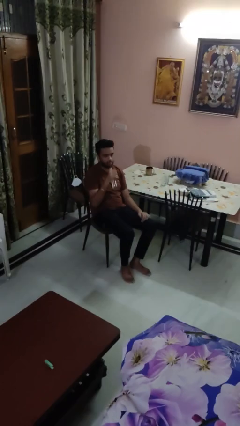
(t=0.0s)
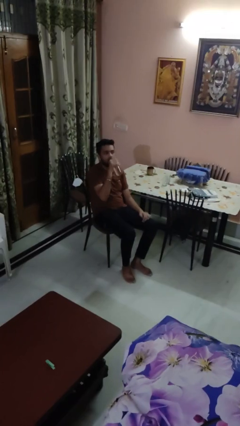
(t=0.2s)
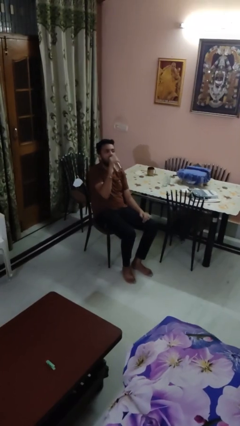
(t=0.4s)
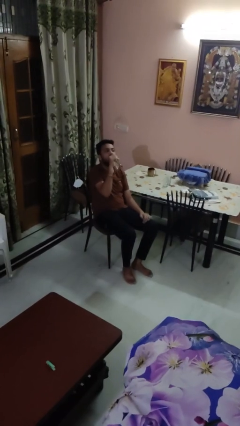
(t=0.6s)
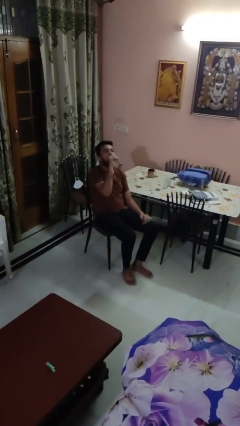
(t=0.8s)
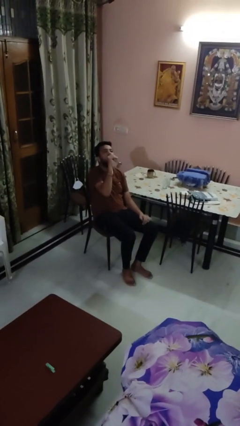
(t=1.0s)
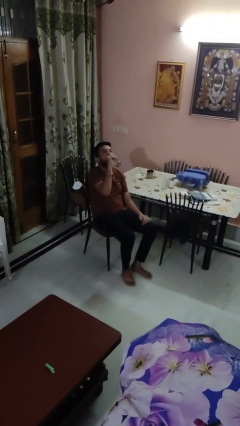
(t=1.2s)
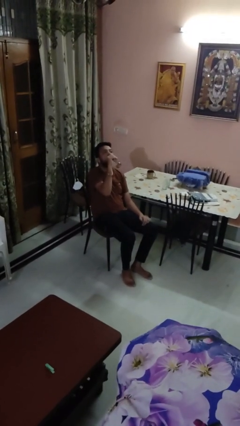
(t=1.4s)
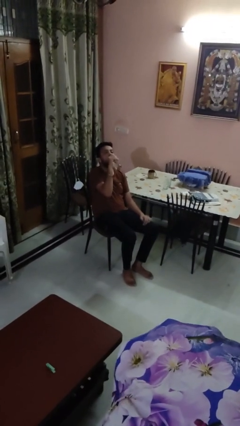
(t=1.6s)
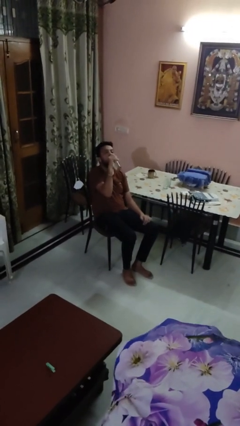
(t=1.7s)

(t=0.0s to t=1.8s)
person drinks from bottle

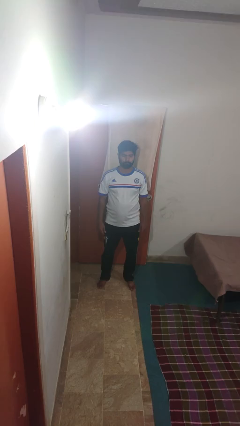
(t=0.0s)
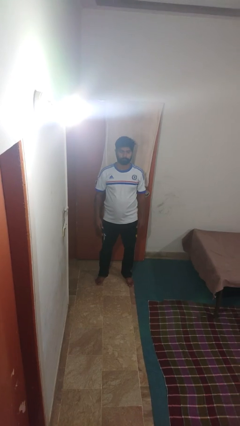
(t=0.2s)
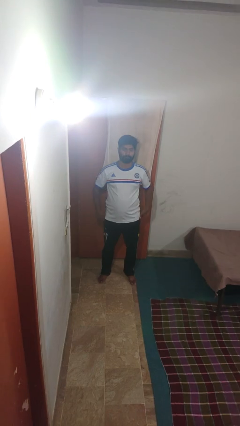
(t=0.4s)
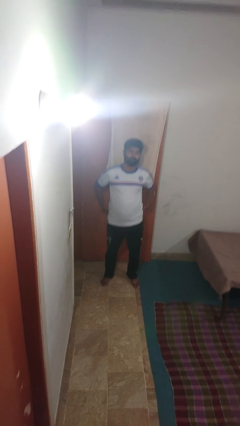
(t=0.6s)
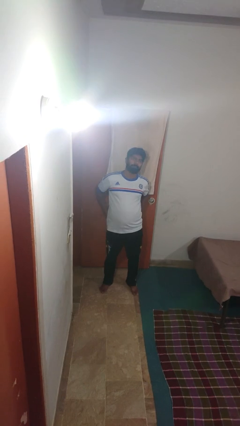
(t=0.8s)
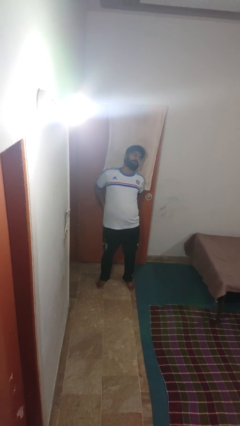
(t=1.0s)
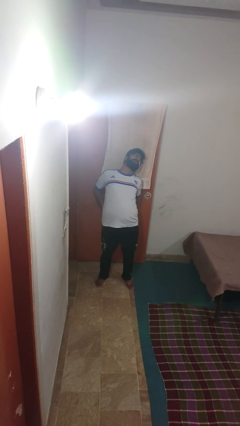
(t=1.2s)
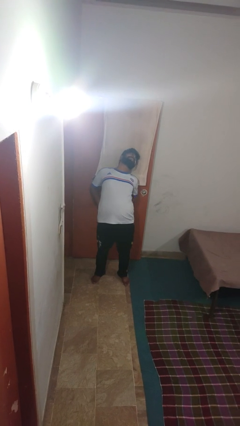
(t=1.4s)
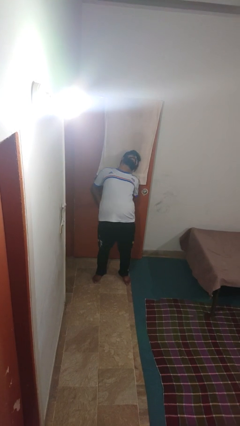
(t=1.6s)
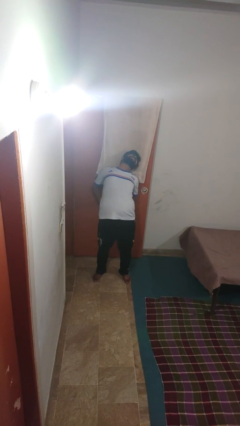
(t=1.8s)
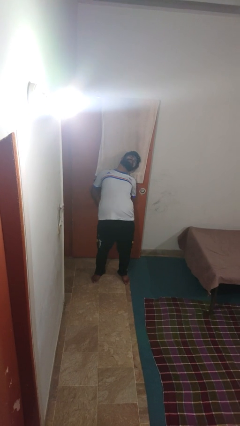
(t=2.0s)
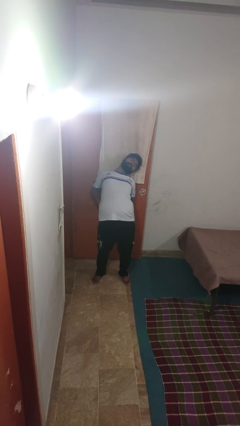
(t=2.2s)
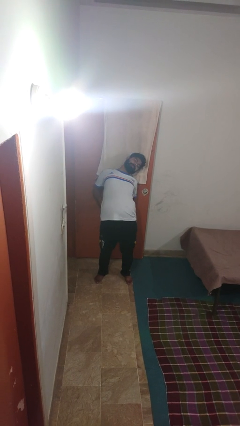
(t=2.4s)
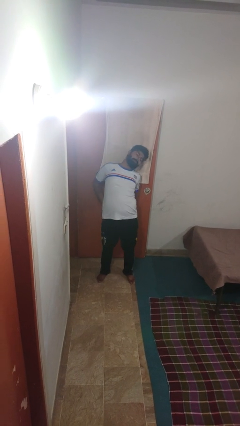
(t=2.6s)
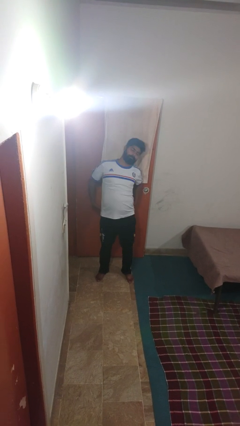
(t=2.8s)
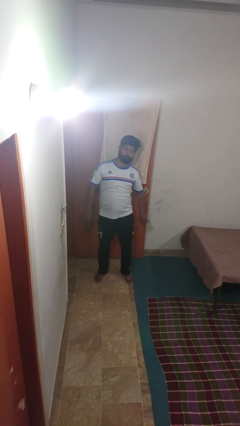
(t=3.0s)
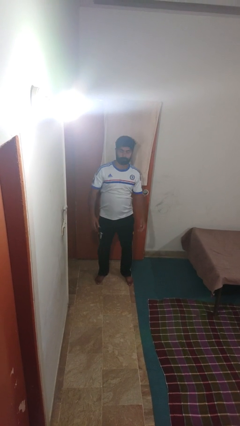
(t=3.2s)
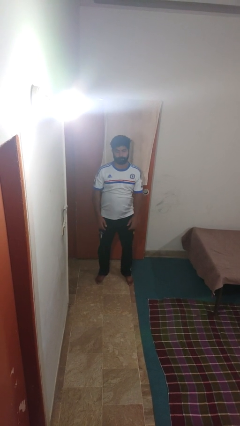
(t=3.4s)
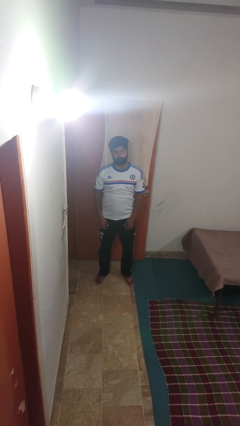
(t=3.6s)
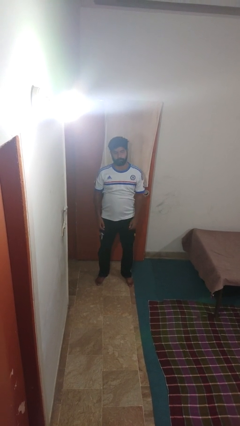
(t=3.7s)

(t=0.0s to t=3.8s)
person stretches back

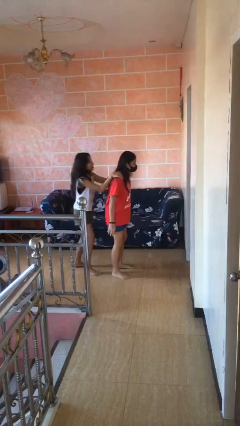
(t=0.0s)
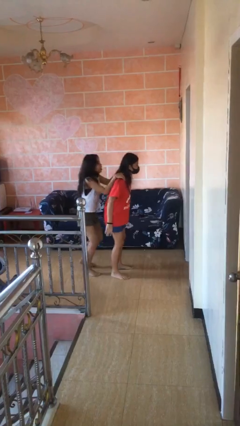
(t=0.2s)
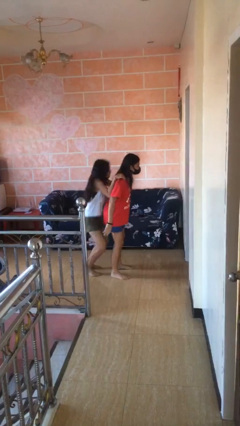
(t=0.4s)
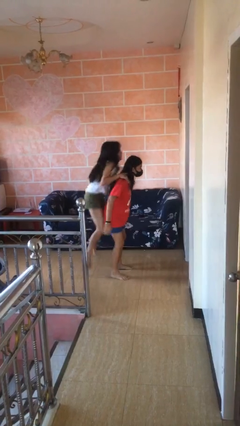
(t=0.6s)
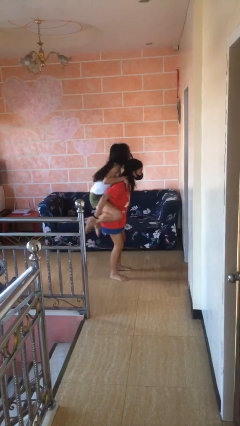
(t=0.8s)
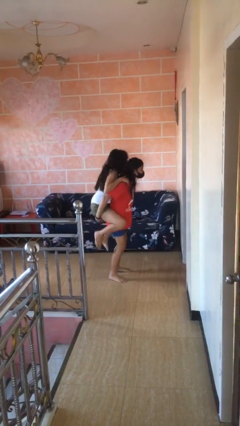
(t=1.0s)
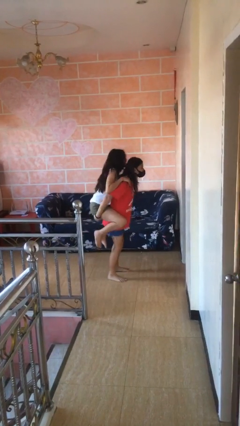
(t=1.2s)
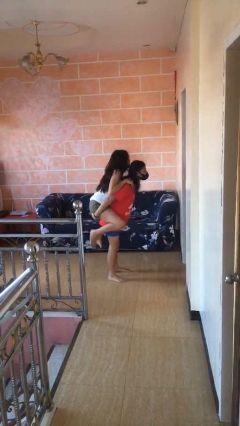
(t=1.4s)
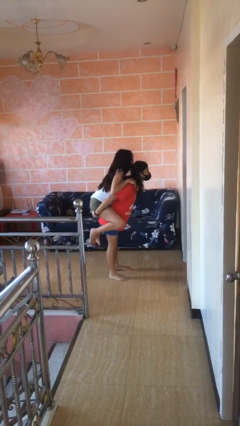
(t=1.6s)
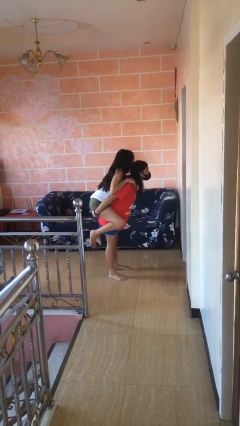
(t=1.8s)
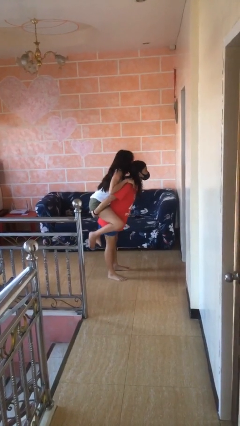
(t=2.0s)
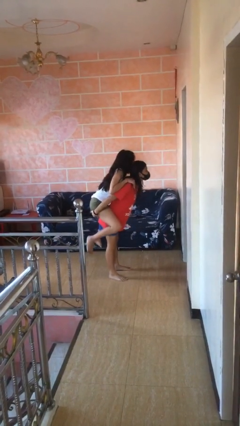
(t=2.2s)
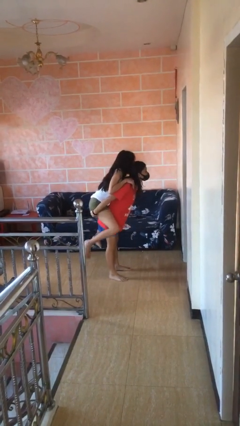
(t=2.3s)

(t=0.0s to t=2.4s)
person carries person over shoulder

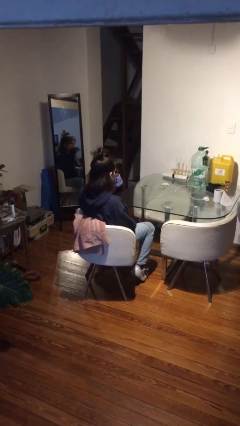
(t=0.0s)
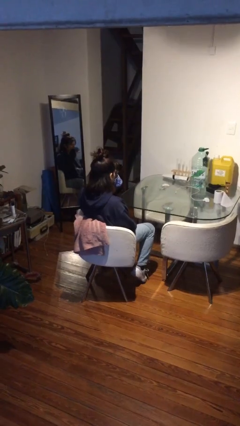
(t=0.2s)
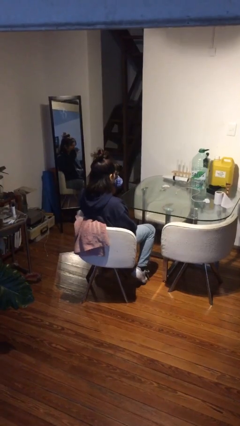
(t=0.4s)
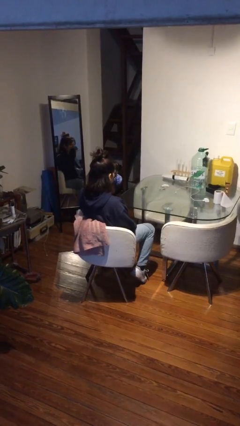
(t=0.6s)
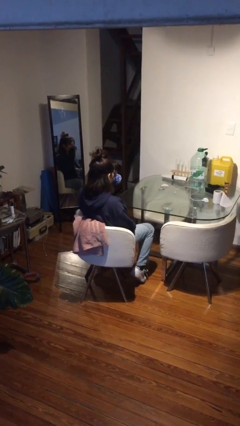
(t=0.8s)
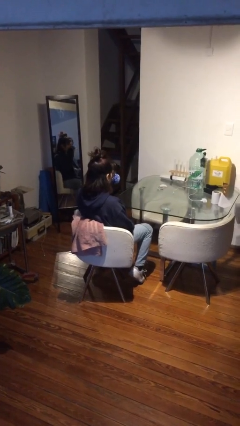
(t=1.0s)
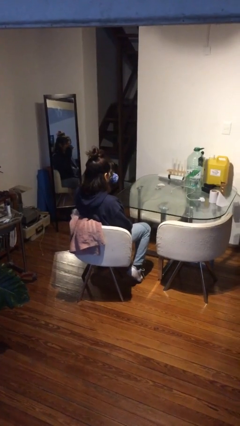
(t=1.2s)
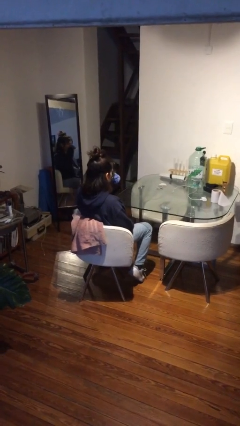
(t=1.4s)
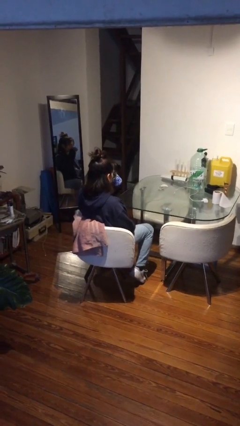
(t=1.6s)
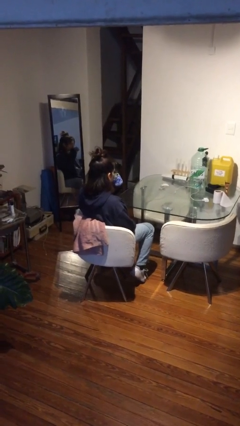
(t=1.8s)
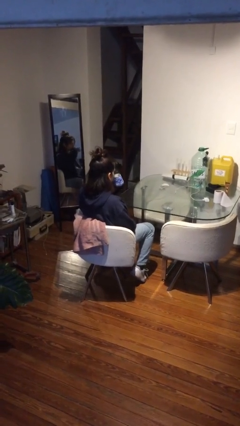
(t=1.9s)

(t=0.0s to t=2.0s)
person drinks from mug

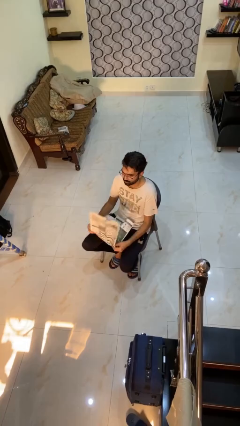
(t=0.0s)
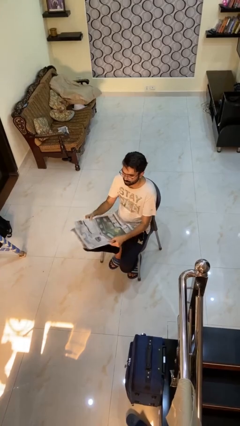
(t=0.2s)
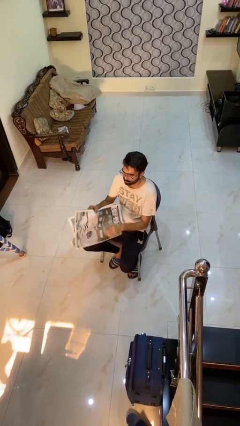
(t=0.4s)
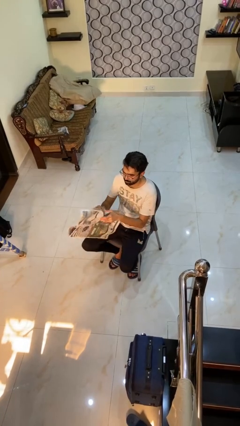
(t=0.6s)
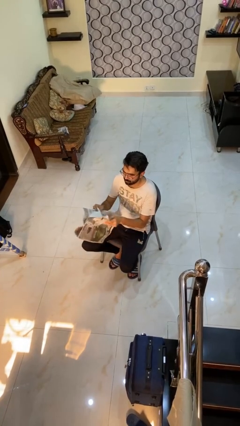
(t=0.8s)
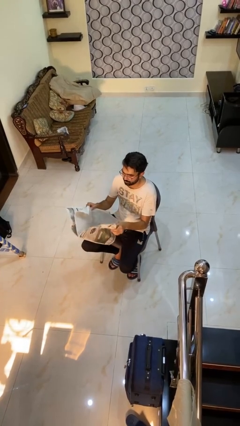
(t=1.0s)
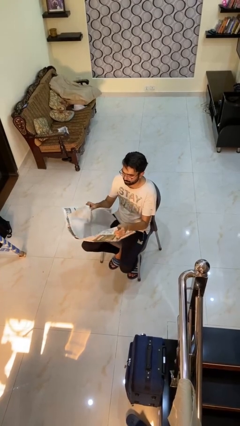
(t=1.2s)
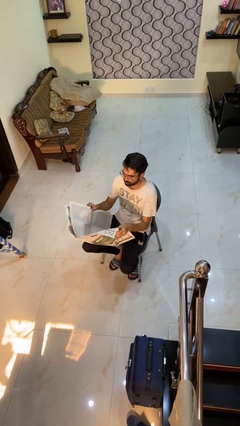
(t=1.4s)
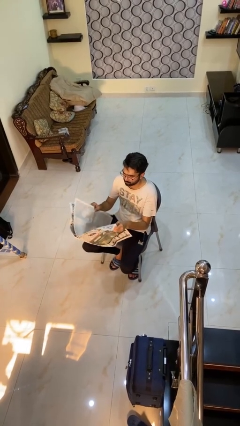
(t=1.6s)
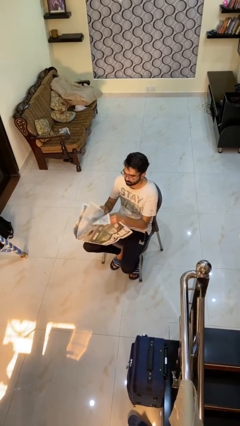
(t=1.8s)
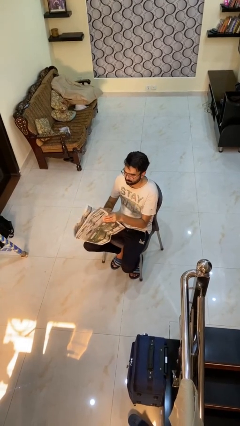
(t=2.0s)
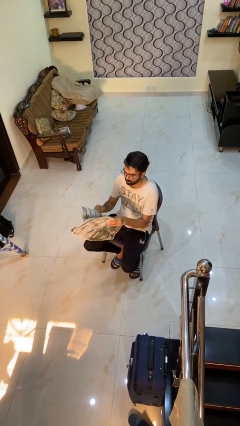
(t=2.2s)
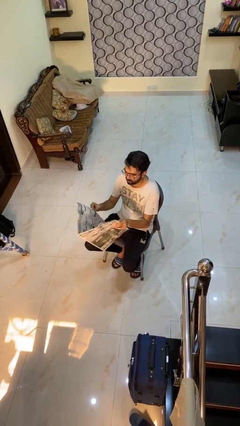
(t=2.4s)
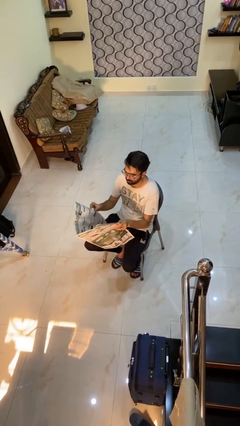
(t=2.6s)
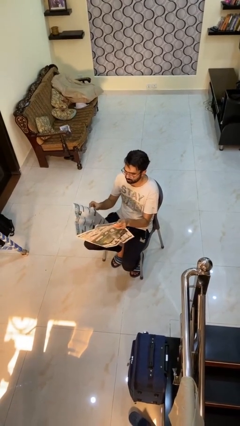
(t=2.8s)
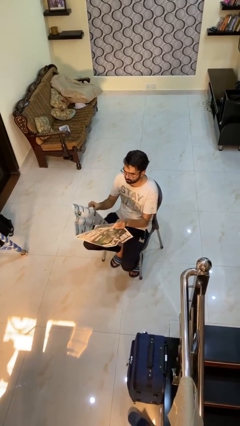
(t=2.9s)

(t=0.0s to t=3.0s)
person reads newspaper

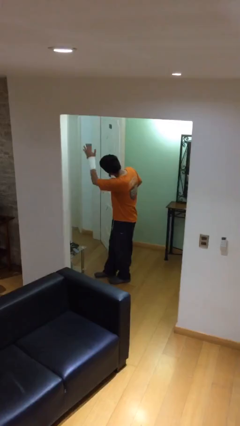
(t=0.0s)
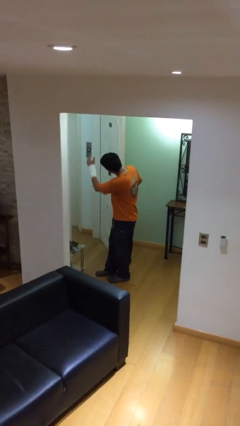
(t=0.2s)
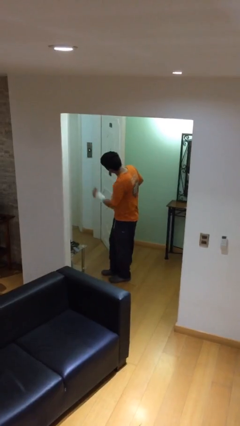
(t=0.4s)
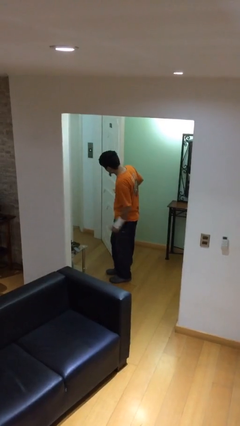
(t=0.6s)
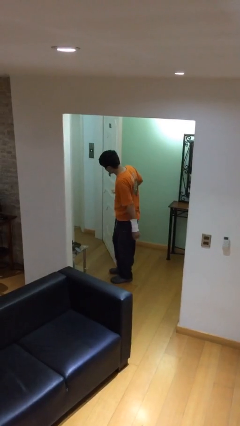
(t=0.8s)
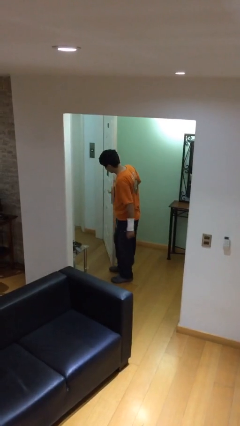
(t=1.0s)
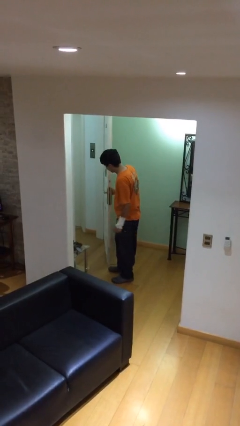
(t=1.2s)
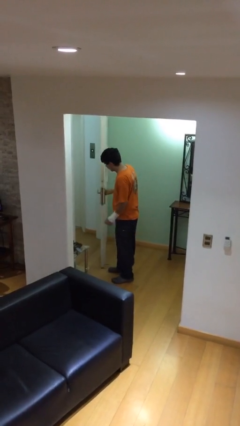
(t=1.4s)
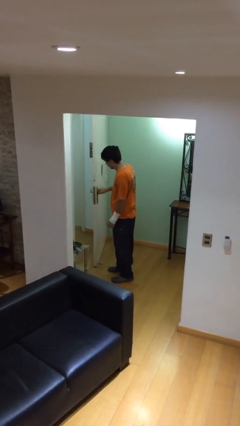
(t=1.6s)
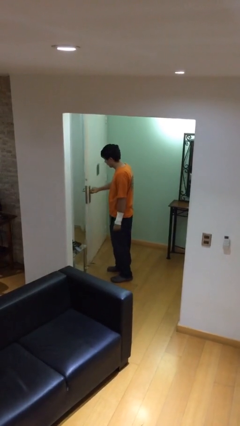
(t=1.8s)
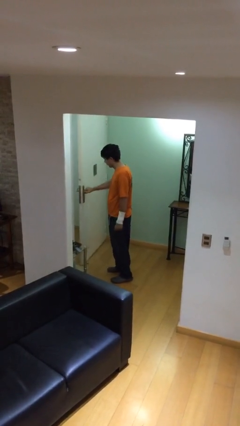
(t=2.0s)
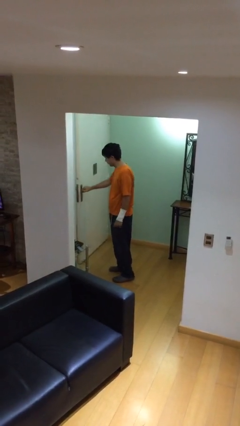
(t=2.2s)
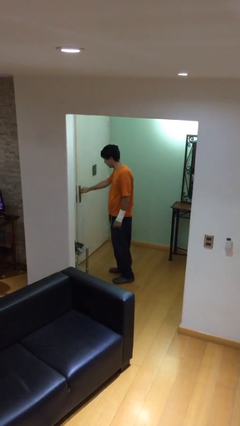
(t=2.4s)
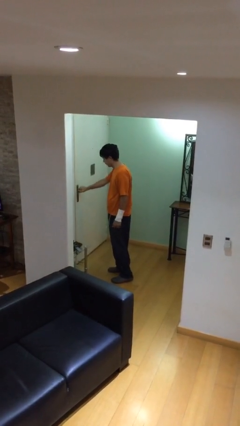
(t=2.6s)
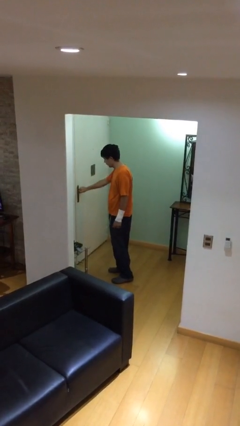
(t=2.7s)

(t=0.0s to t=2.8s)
person closes facility door

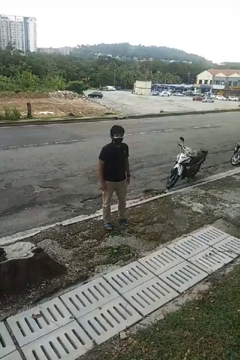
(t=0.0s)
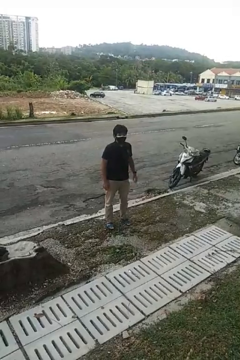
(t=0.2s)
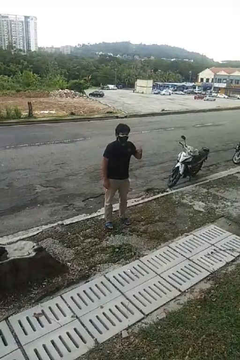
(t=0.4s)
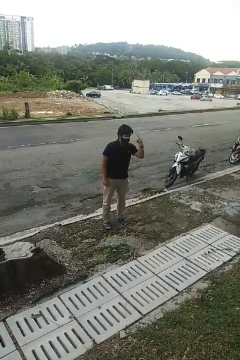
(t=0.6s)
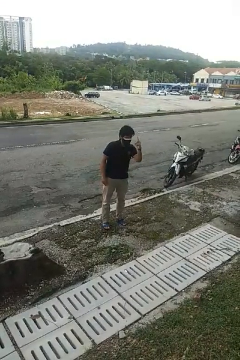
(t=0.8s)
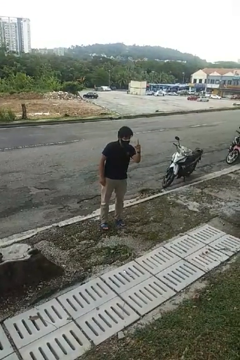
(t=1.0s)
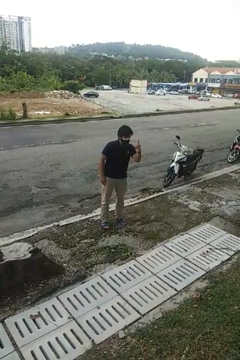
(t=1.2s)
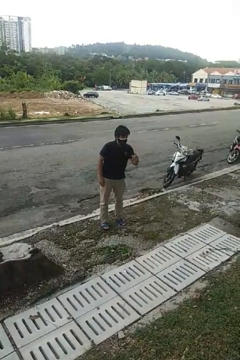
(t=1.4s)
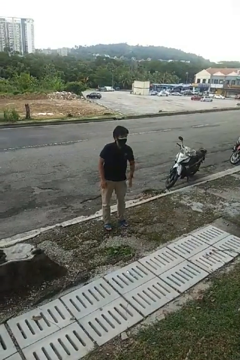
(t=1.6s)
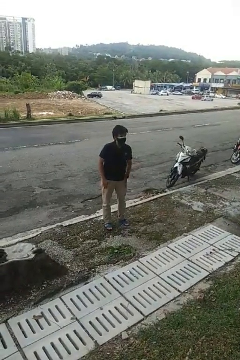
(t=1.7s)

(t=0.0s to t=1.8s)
person gestures number one
